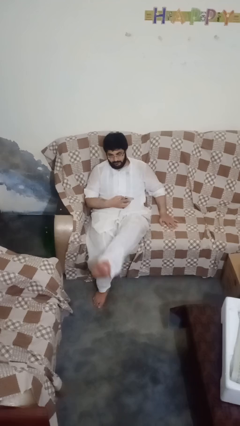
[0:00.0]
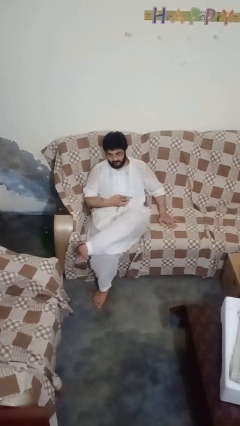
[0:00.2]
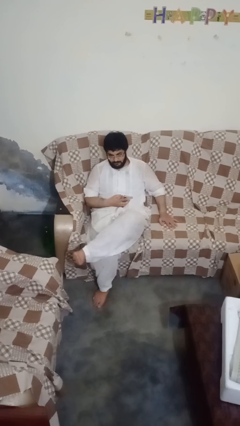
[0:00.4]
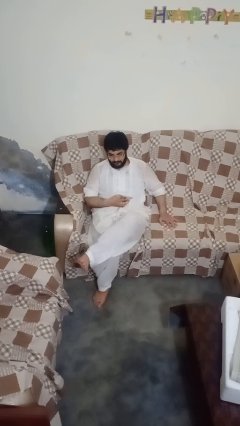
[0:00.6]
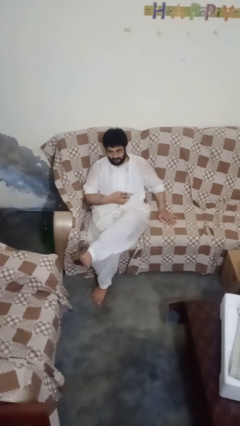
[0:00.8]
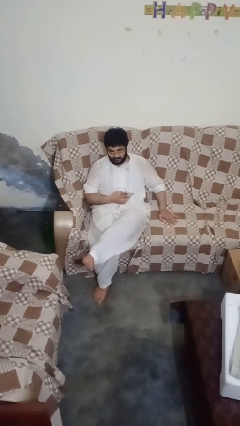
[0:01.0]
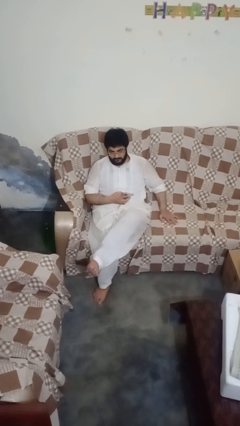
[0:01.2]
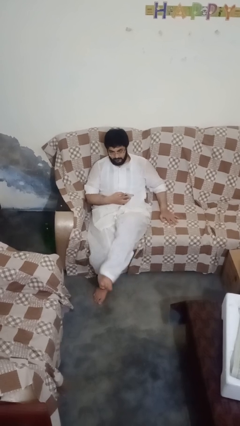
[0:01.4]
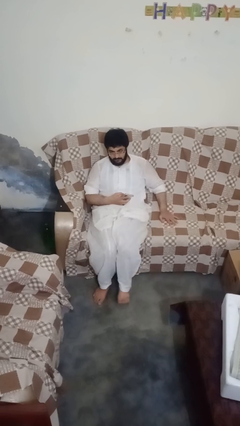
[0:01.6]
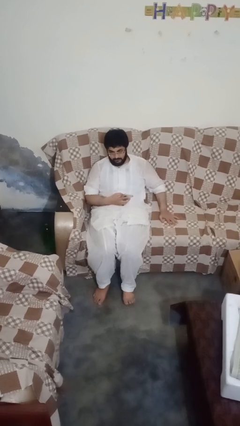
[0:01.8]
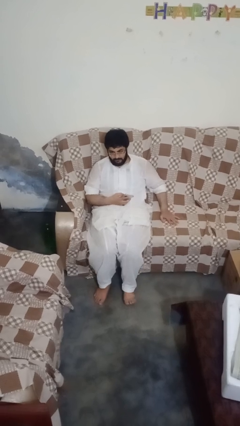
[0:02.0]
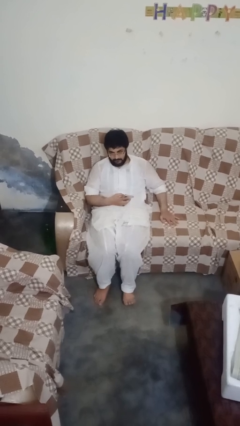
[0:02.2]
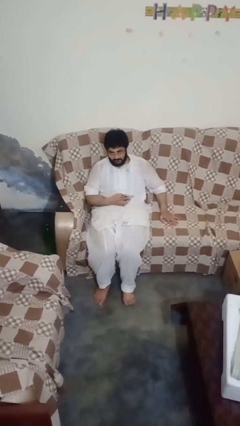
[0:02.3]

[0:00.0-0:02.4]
person crosses legs

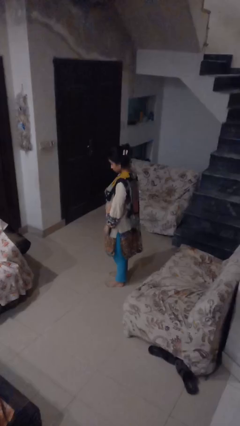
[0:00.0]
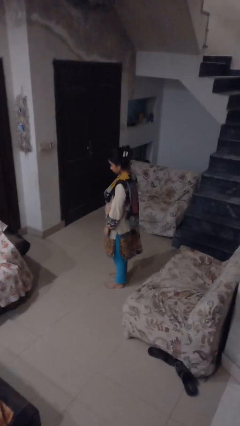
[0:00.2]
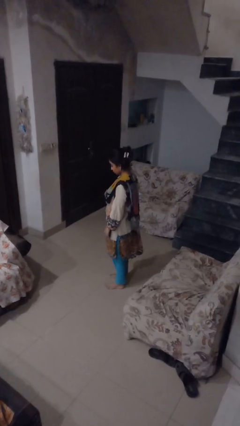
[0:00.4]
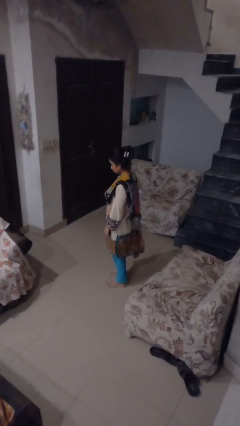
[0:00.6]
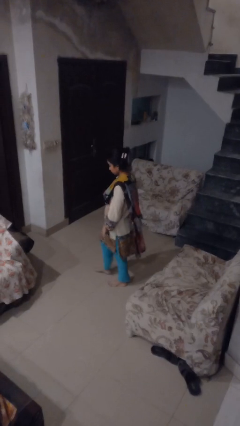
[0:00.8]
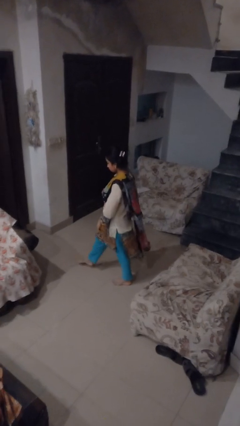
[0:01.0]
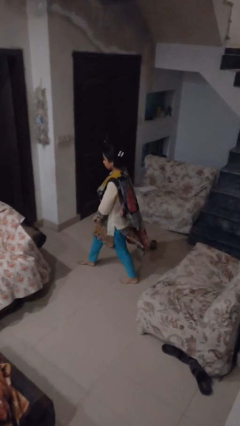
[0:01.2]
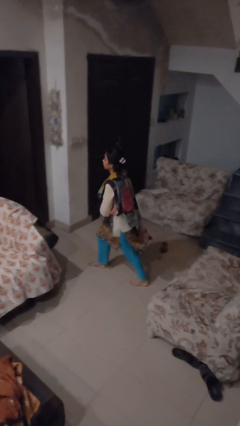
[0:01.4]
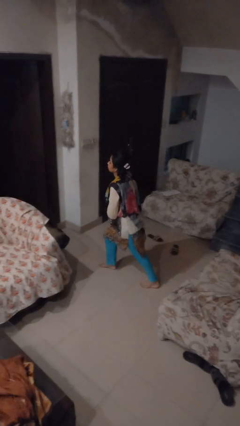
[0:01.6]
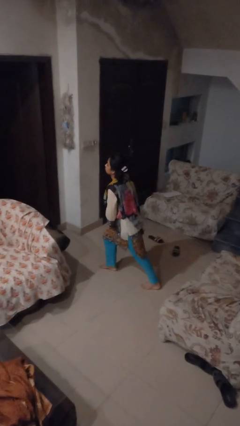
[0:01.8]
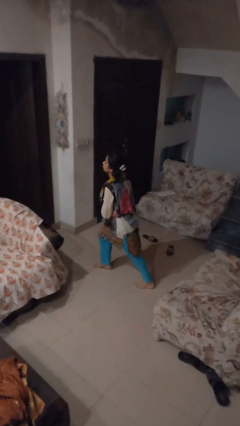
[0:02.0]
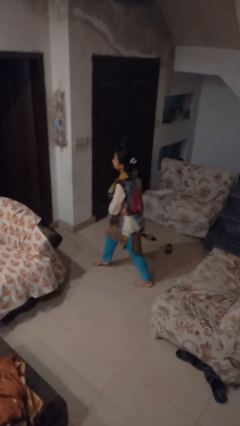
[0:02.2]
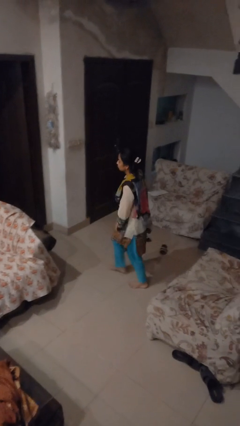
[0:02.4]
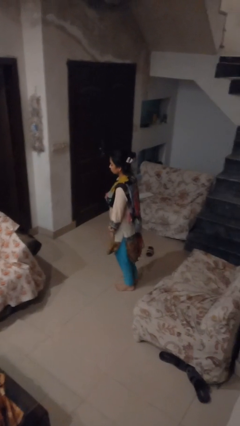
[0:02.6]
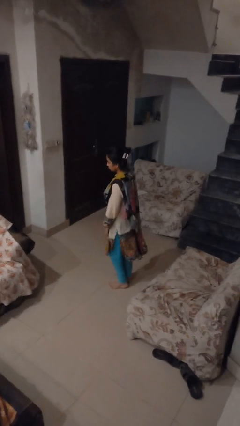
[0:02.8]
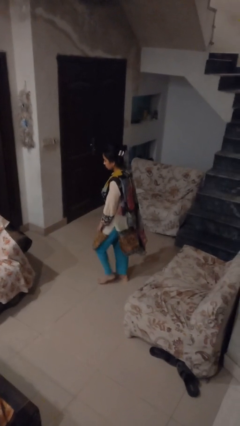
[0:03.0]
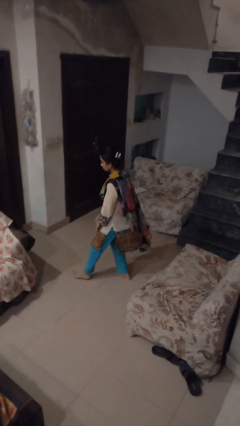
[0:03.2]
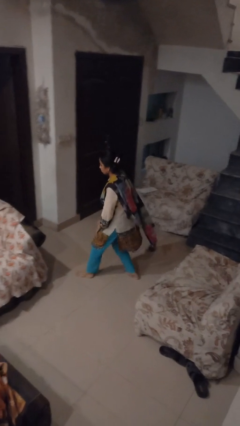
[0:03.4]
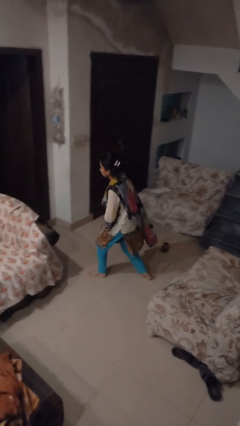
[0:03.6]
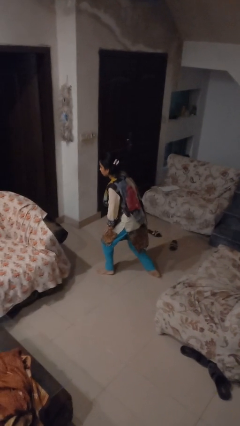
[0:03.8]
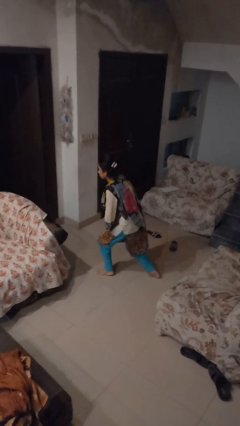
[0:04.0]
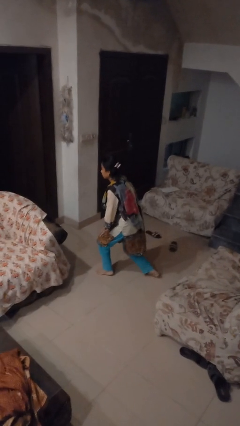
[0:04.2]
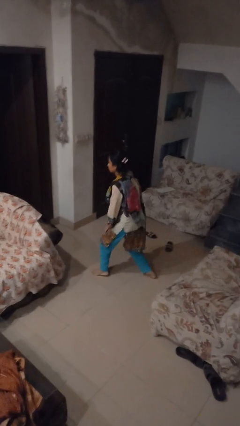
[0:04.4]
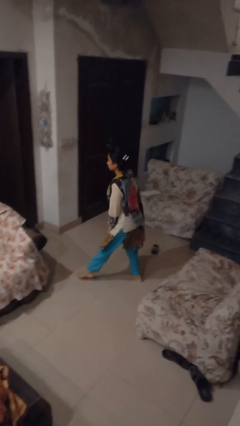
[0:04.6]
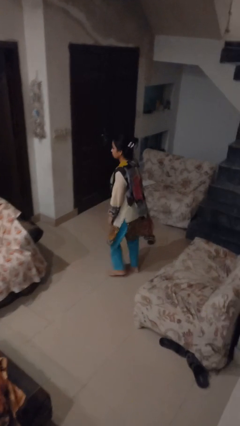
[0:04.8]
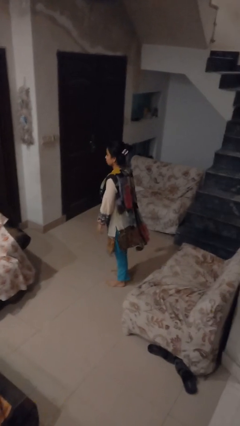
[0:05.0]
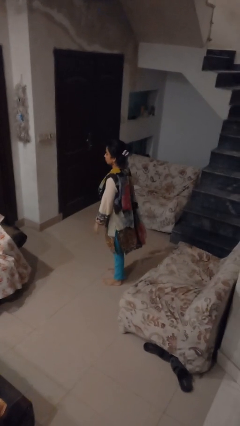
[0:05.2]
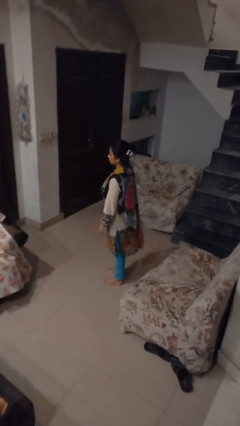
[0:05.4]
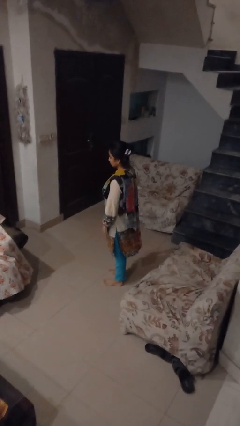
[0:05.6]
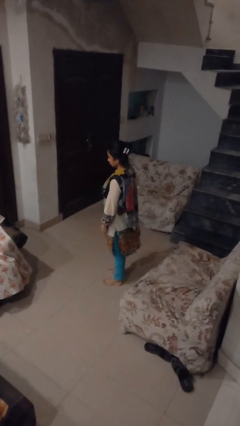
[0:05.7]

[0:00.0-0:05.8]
person exercises with lunges

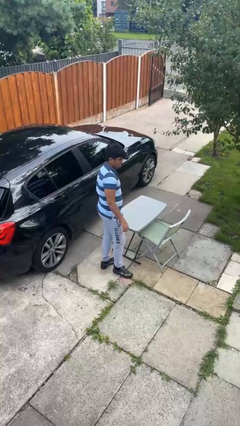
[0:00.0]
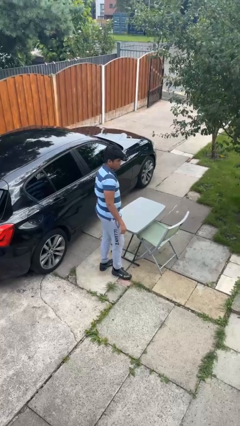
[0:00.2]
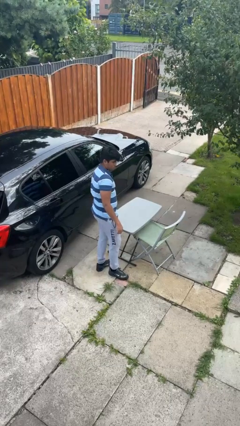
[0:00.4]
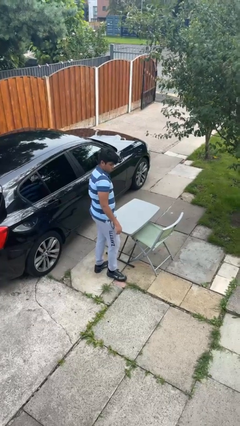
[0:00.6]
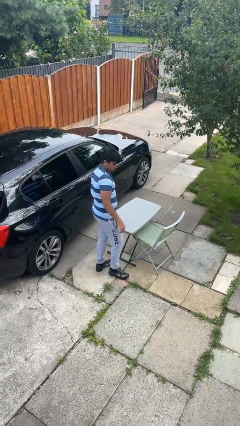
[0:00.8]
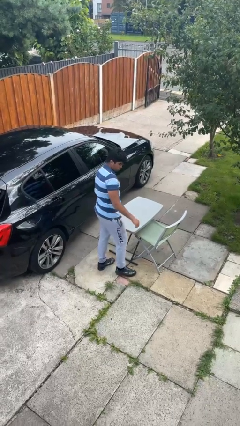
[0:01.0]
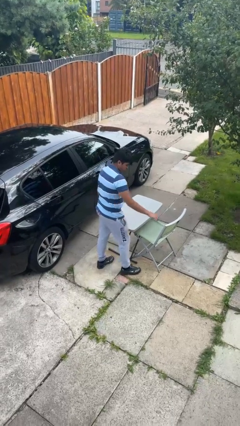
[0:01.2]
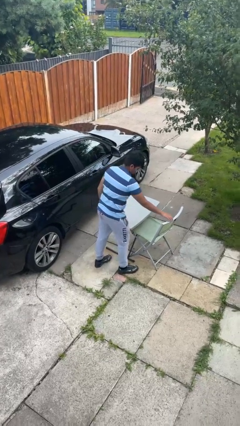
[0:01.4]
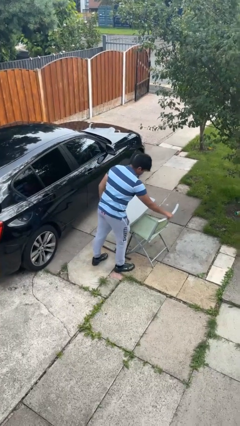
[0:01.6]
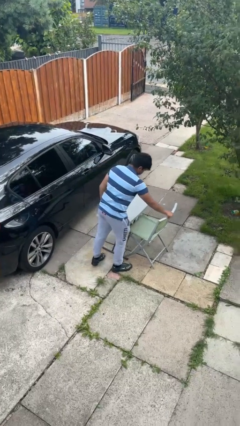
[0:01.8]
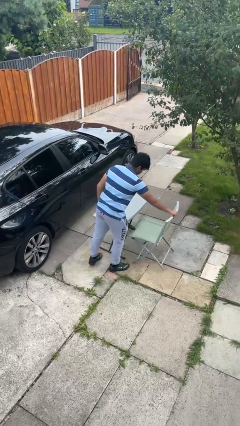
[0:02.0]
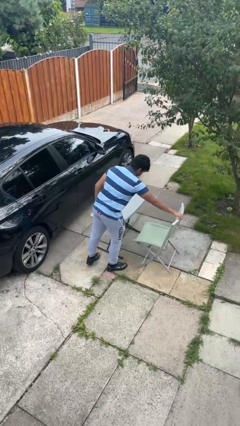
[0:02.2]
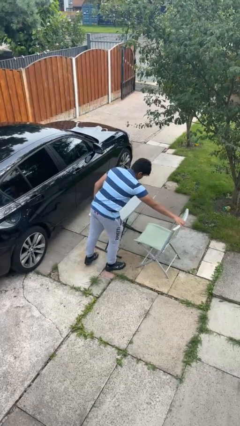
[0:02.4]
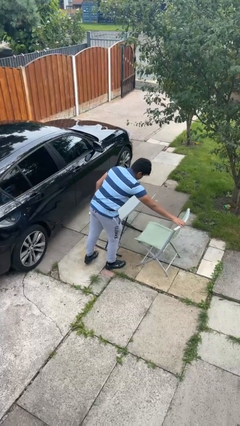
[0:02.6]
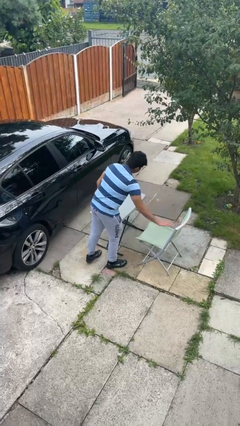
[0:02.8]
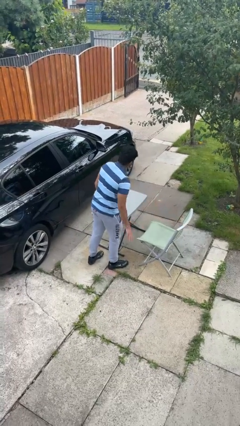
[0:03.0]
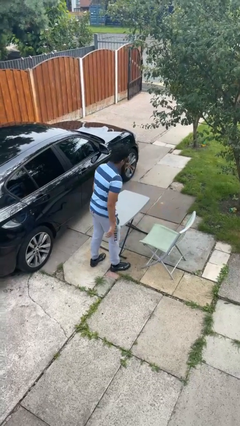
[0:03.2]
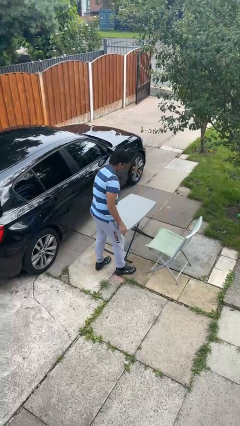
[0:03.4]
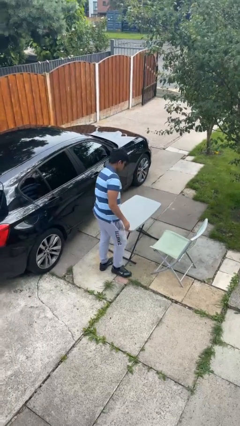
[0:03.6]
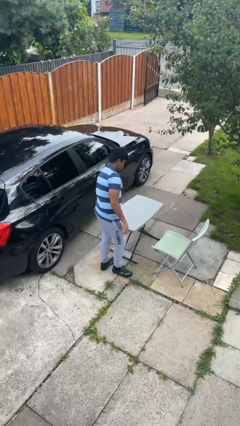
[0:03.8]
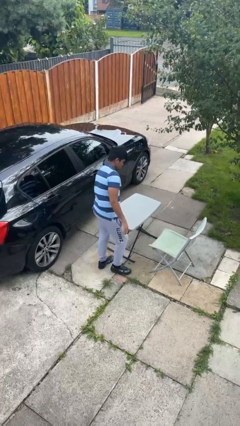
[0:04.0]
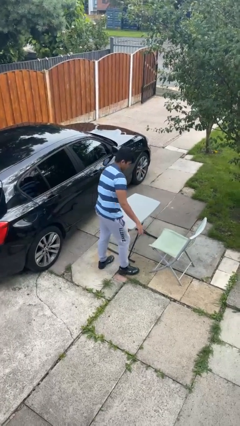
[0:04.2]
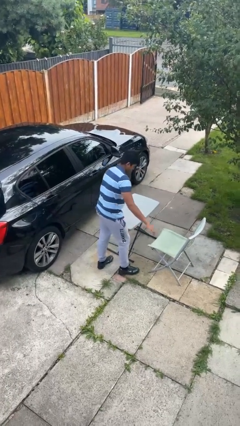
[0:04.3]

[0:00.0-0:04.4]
person pulls out chair

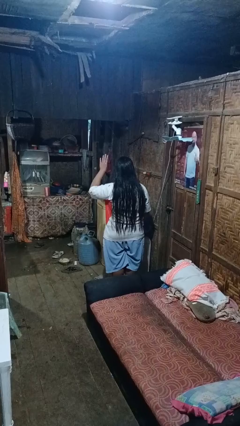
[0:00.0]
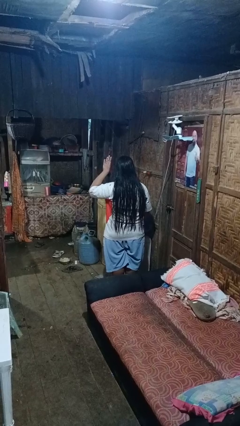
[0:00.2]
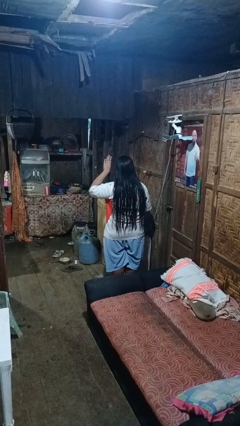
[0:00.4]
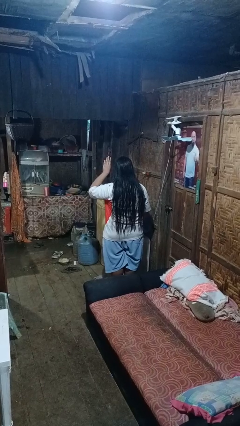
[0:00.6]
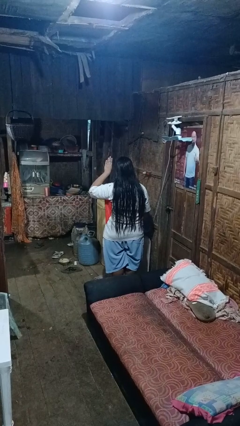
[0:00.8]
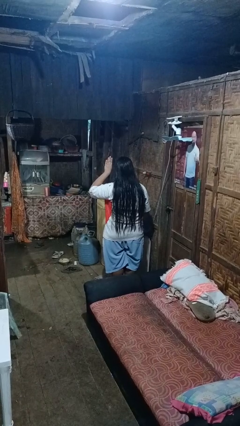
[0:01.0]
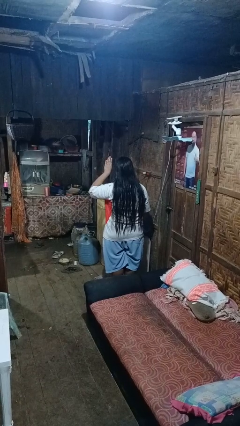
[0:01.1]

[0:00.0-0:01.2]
person gestures number four

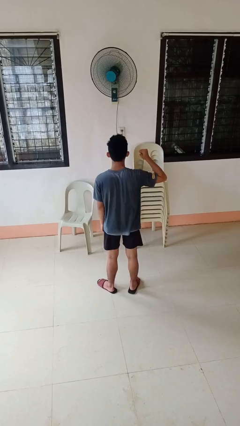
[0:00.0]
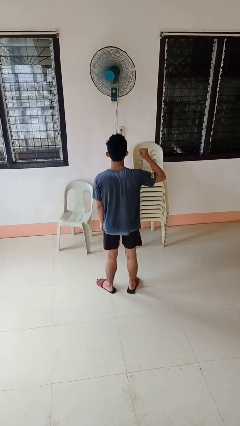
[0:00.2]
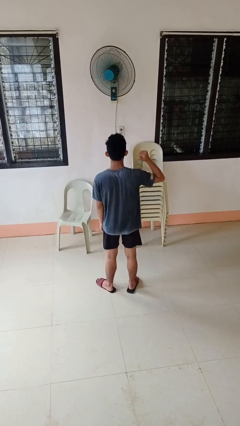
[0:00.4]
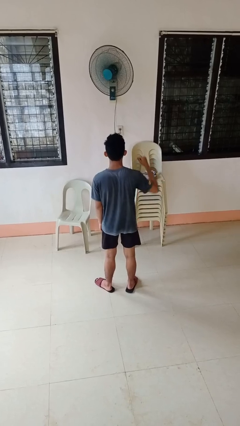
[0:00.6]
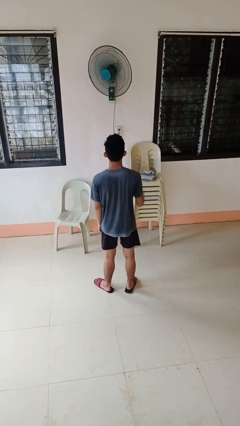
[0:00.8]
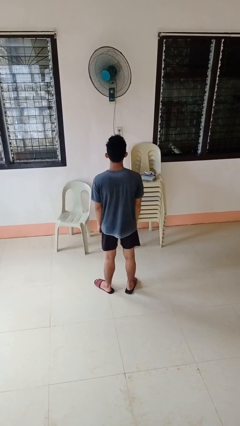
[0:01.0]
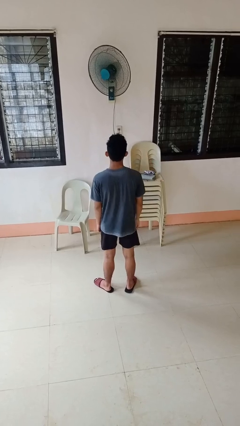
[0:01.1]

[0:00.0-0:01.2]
person gestures behind me

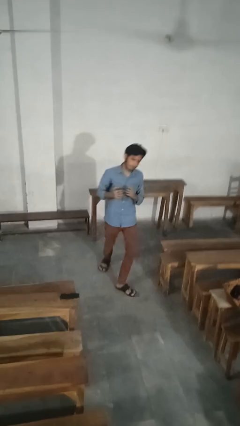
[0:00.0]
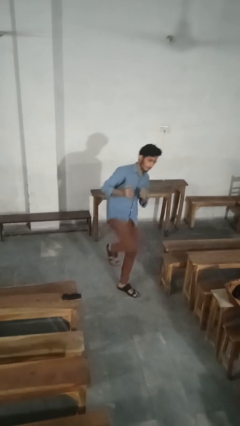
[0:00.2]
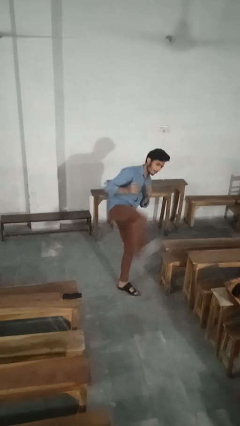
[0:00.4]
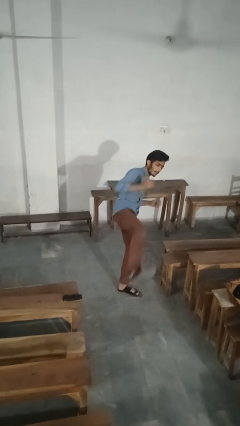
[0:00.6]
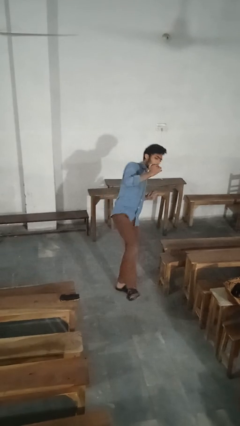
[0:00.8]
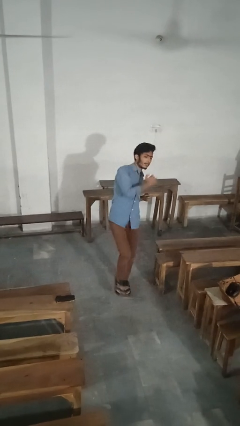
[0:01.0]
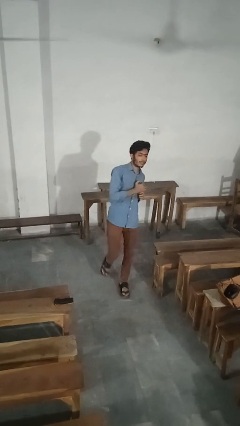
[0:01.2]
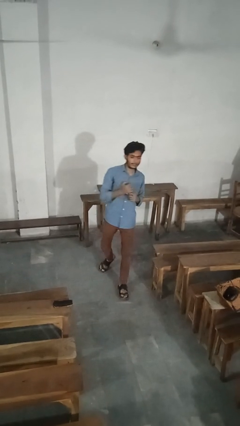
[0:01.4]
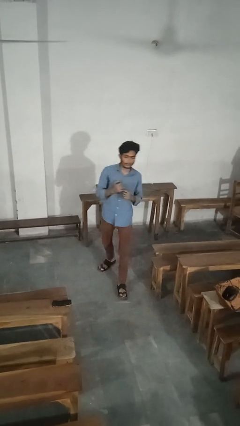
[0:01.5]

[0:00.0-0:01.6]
person karate kicks

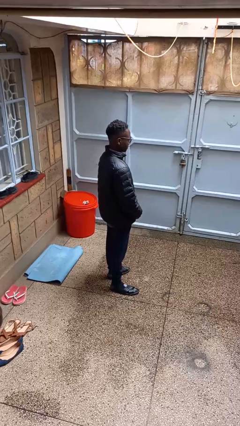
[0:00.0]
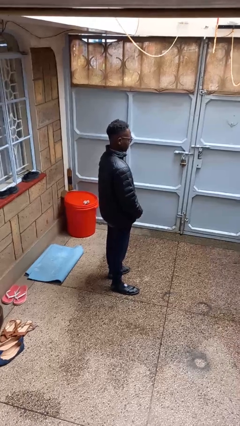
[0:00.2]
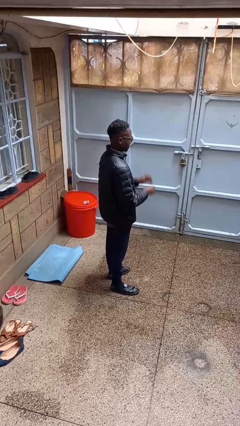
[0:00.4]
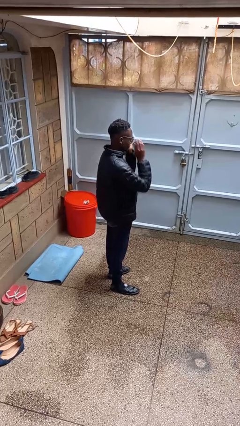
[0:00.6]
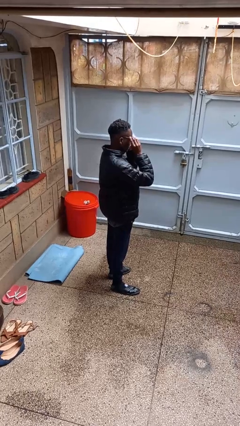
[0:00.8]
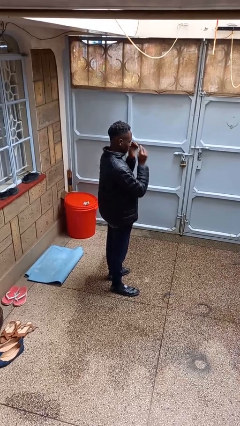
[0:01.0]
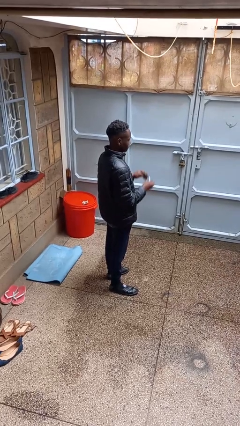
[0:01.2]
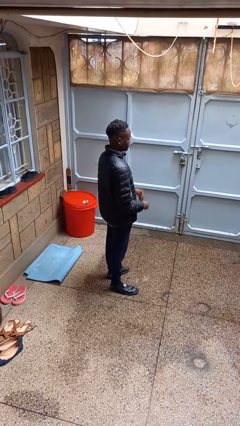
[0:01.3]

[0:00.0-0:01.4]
person takes off glasses
